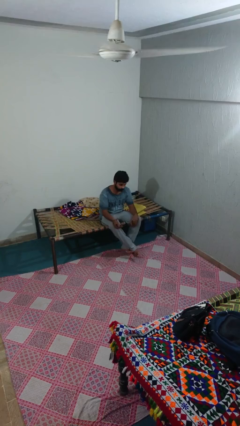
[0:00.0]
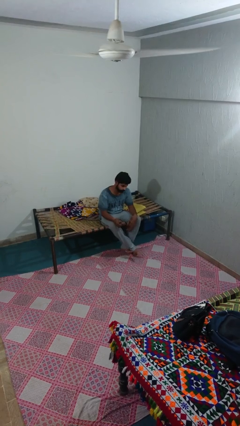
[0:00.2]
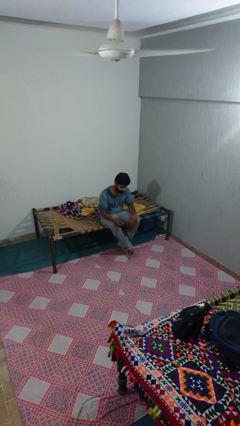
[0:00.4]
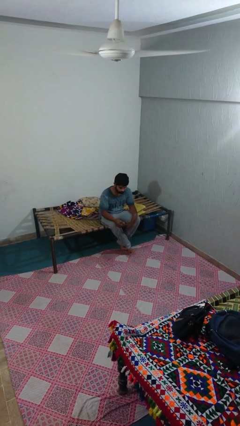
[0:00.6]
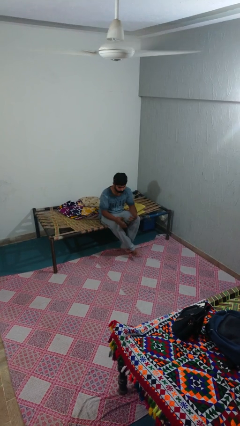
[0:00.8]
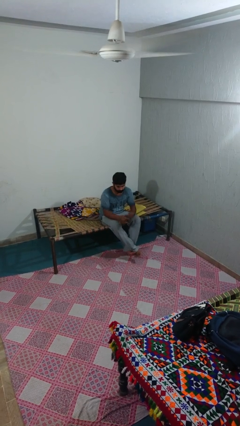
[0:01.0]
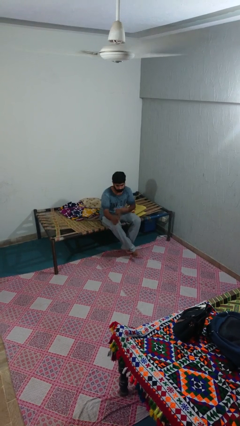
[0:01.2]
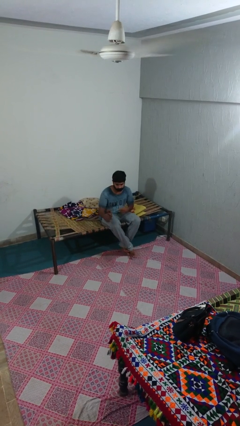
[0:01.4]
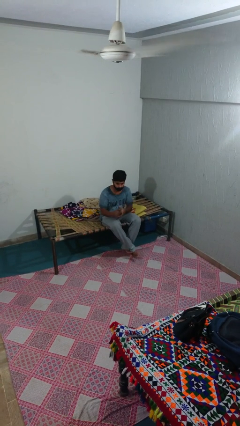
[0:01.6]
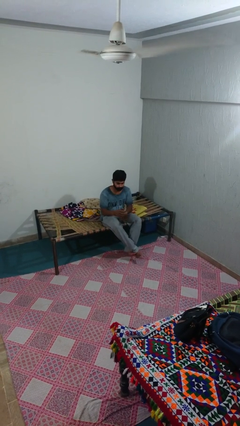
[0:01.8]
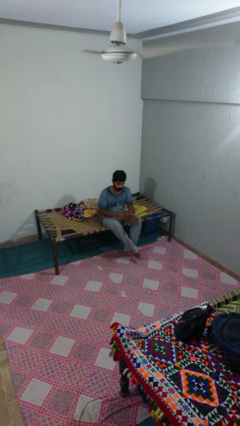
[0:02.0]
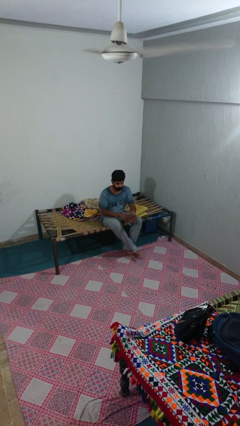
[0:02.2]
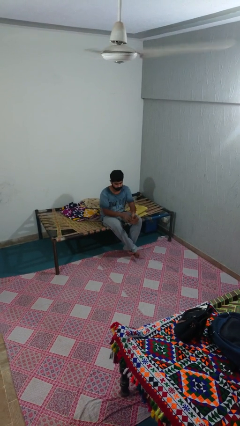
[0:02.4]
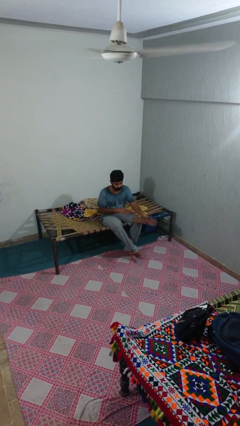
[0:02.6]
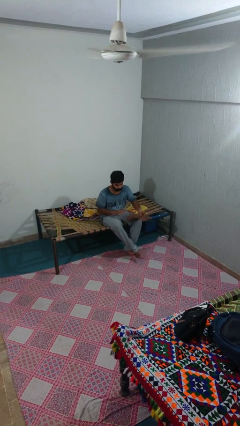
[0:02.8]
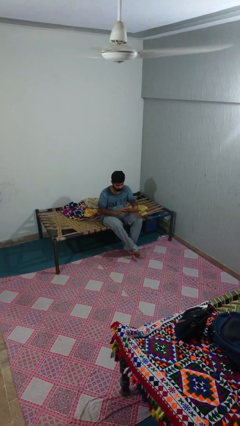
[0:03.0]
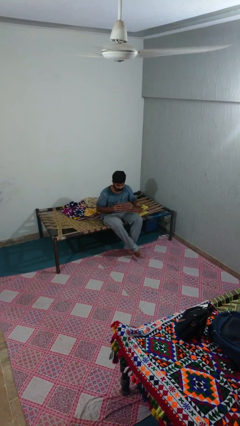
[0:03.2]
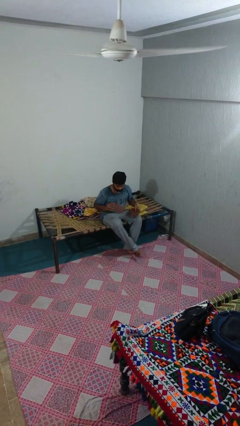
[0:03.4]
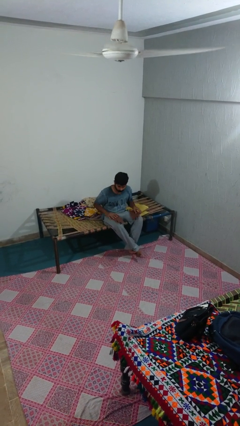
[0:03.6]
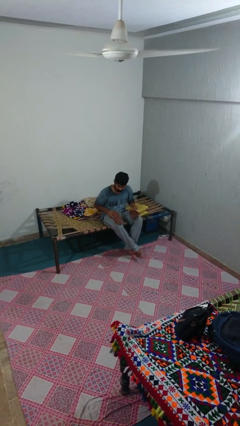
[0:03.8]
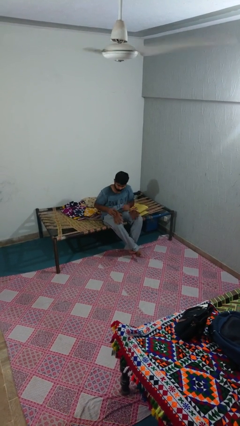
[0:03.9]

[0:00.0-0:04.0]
person takes off gloves

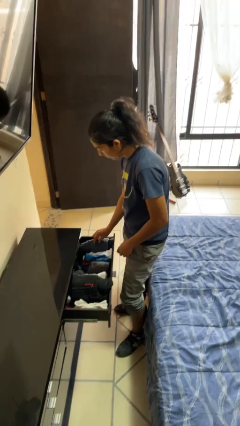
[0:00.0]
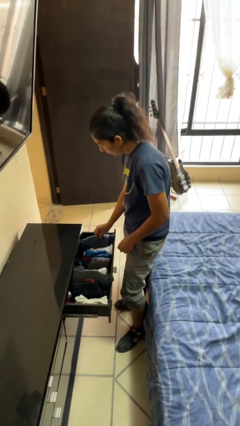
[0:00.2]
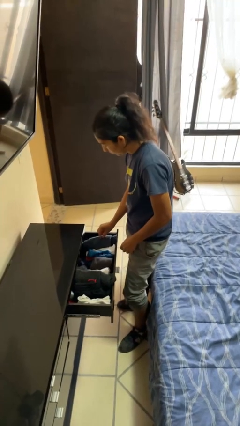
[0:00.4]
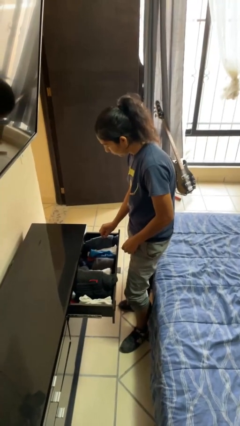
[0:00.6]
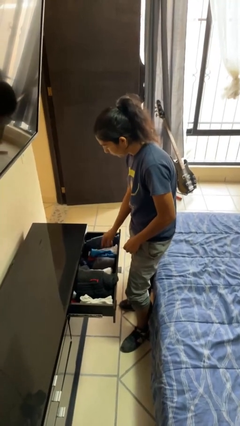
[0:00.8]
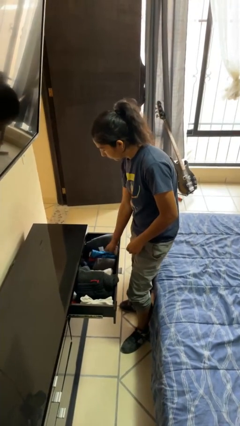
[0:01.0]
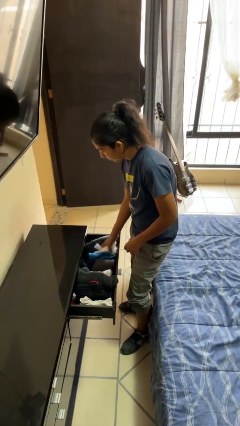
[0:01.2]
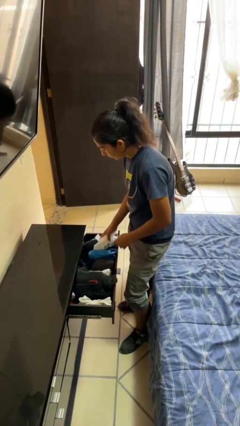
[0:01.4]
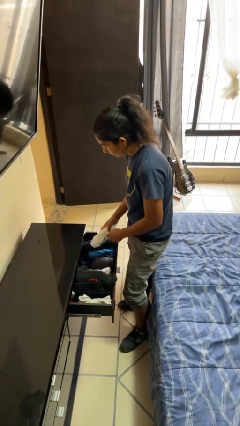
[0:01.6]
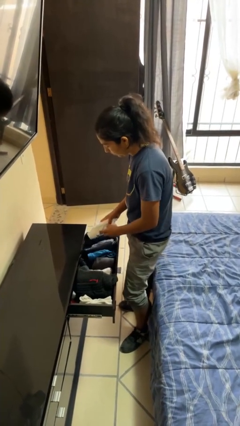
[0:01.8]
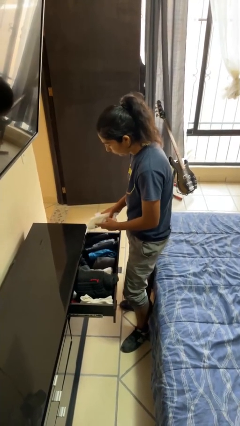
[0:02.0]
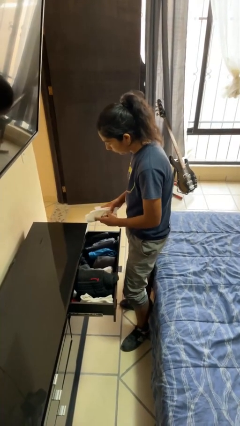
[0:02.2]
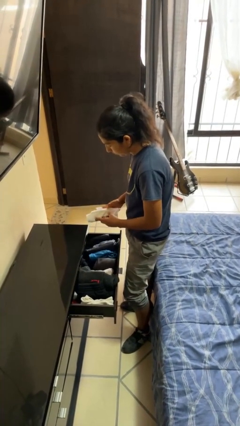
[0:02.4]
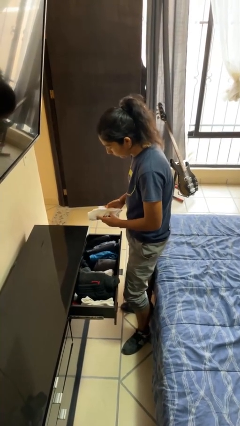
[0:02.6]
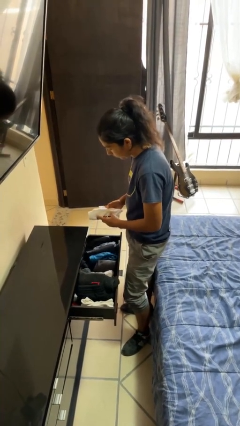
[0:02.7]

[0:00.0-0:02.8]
person takes clothes from dresser

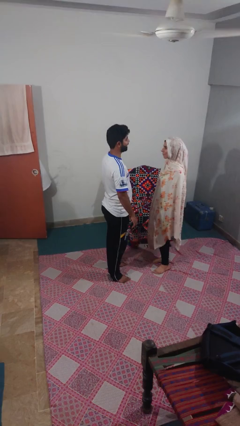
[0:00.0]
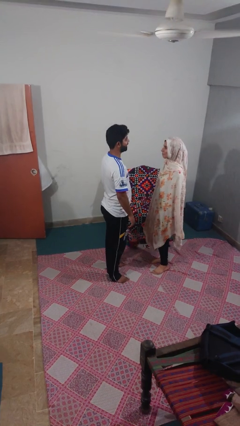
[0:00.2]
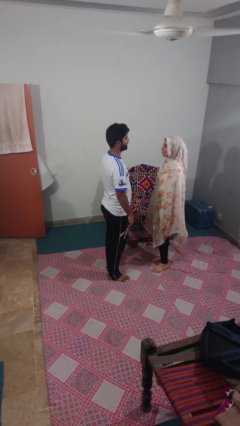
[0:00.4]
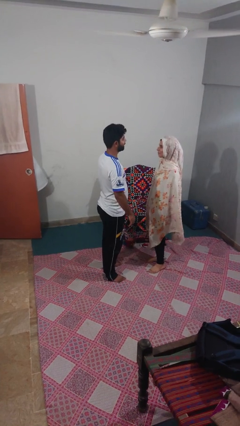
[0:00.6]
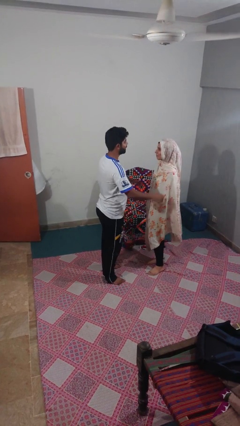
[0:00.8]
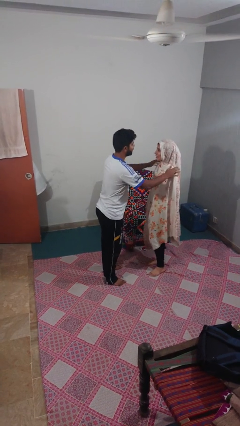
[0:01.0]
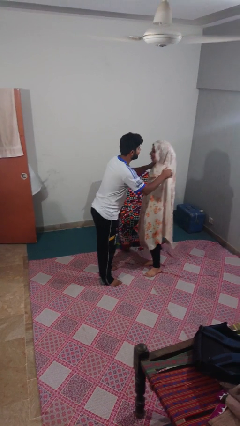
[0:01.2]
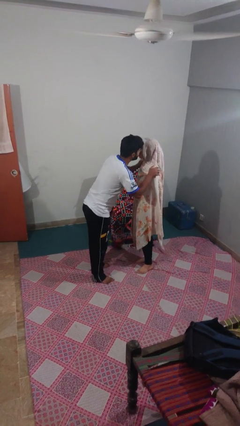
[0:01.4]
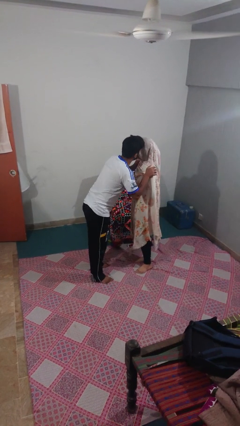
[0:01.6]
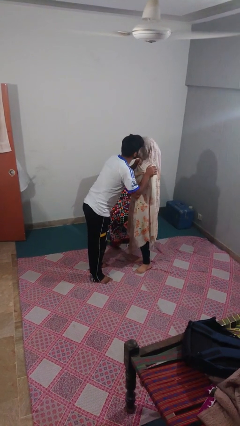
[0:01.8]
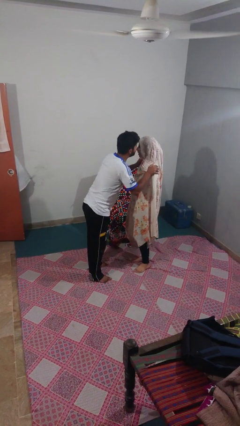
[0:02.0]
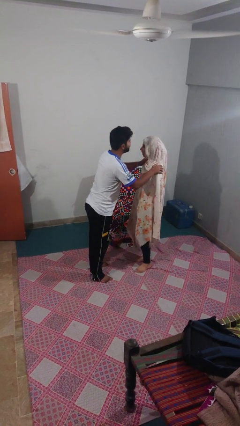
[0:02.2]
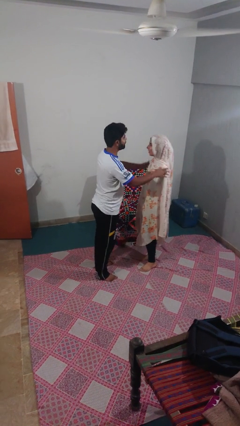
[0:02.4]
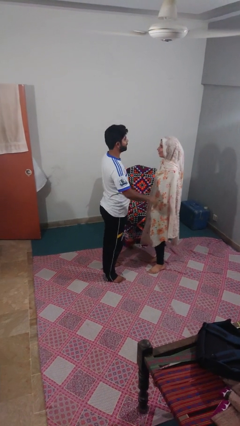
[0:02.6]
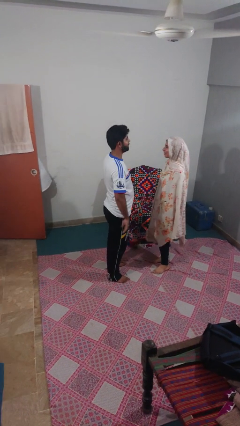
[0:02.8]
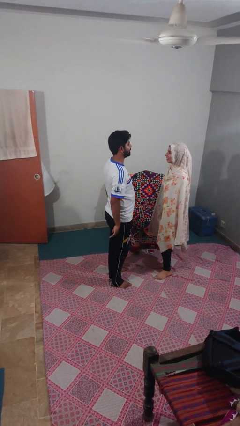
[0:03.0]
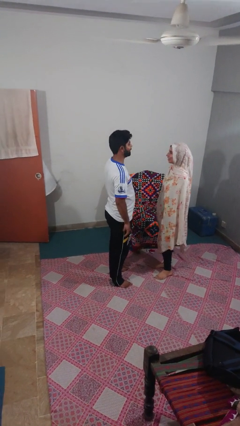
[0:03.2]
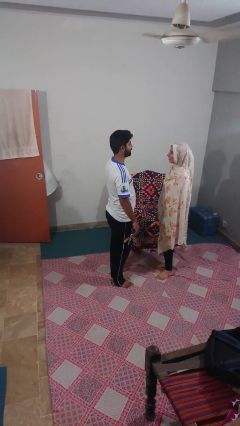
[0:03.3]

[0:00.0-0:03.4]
person kisses cheek of person

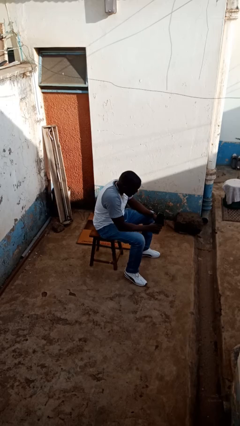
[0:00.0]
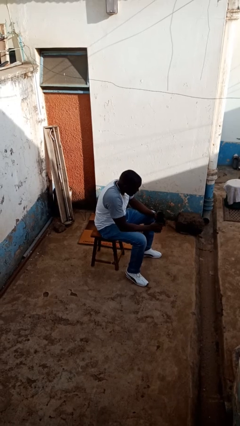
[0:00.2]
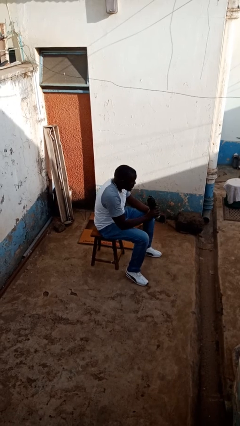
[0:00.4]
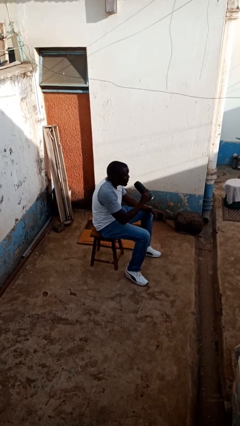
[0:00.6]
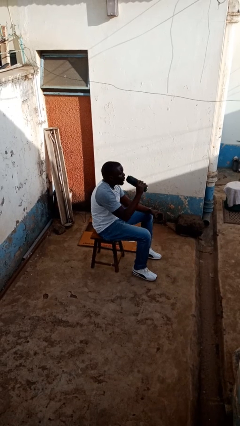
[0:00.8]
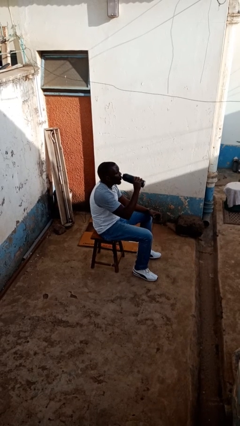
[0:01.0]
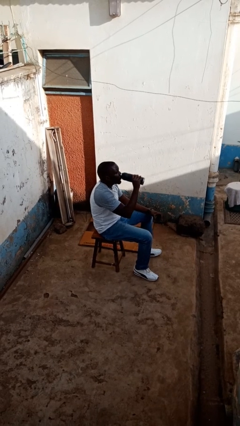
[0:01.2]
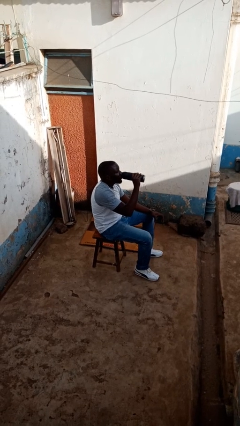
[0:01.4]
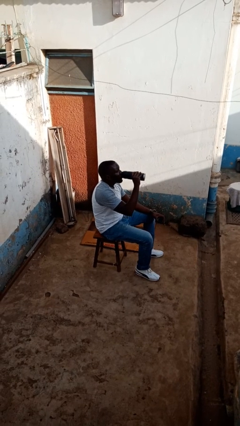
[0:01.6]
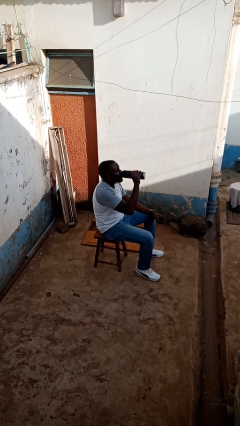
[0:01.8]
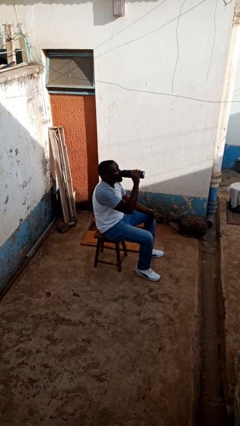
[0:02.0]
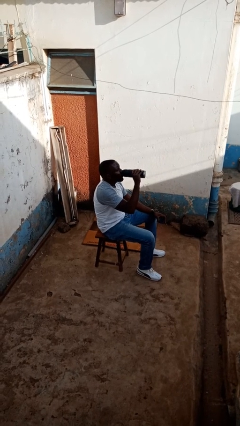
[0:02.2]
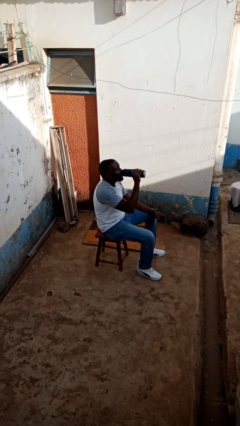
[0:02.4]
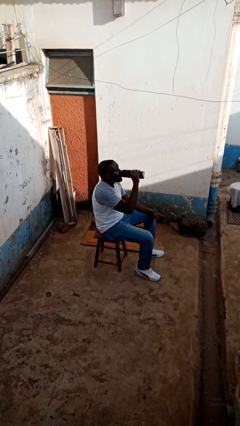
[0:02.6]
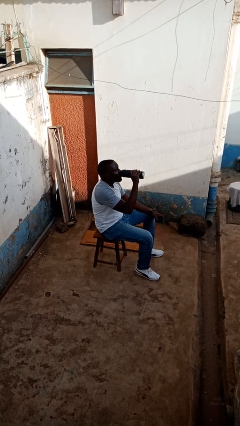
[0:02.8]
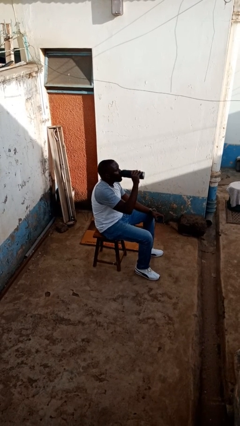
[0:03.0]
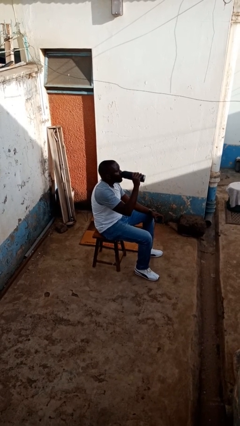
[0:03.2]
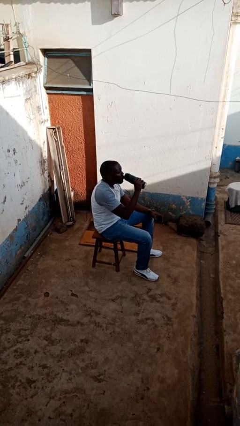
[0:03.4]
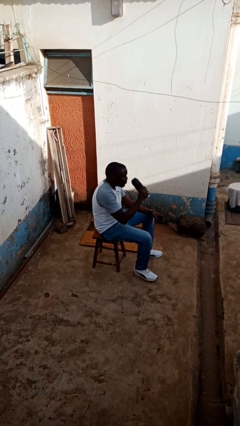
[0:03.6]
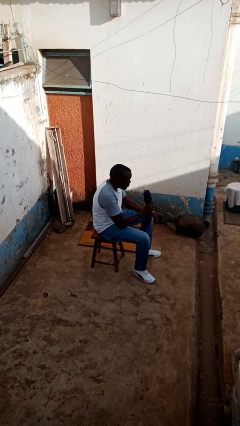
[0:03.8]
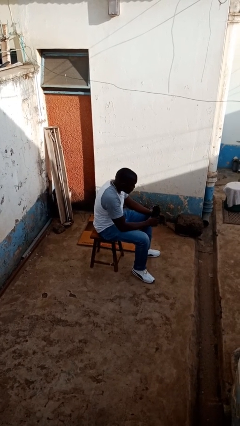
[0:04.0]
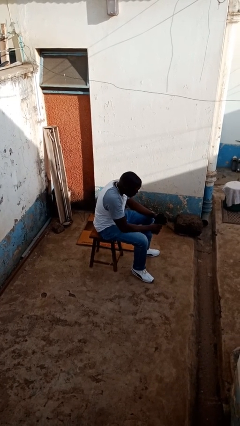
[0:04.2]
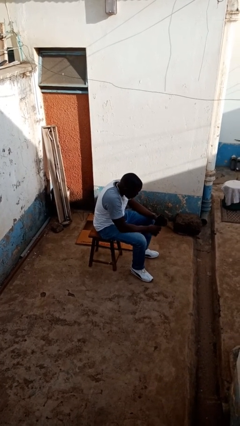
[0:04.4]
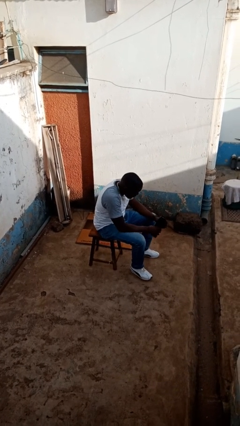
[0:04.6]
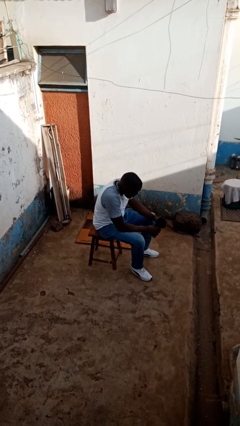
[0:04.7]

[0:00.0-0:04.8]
person drinks from bottle

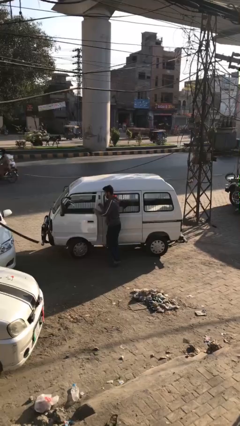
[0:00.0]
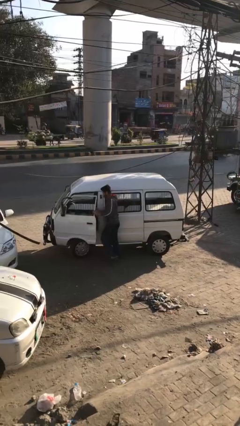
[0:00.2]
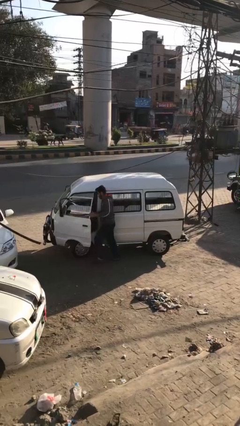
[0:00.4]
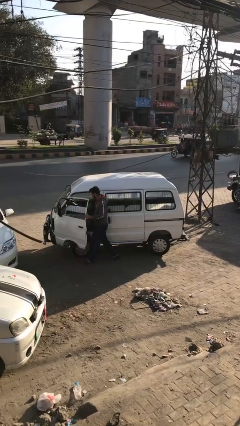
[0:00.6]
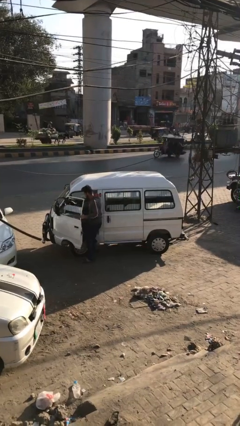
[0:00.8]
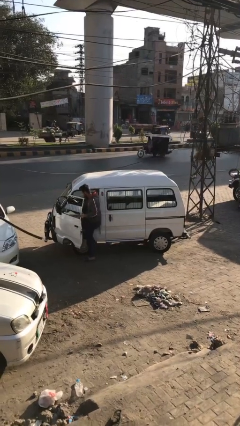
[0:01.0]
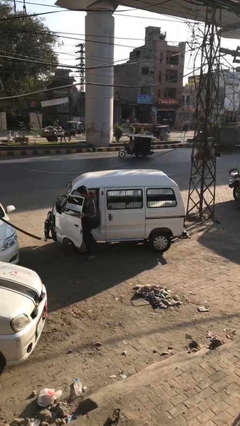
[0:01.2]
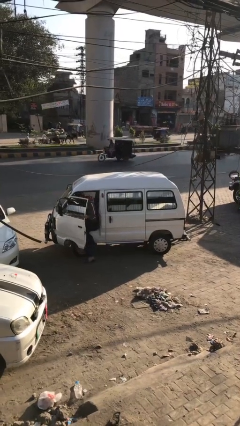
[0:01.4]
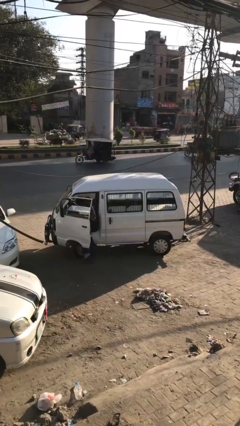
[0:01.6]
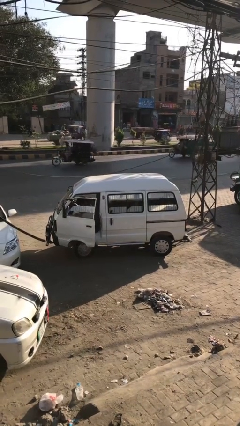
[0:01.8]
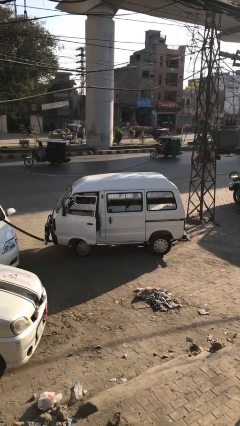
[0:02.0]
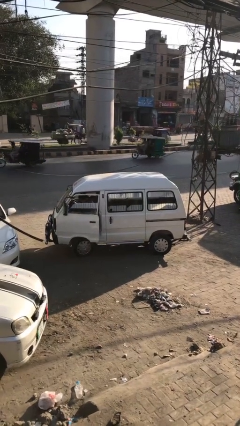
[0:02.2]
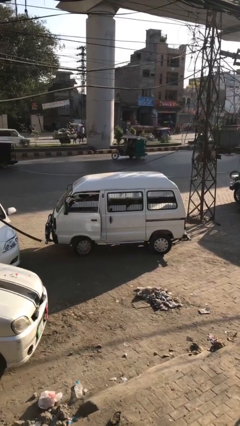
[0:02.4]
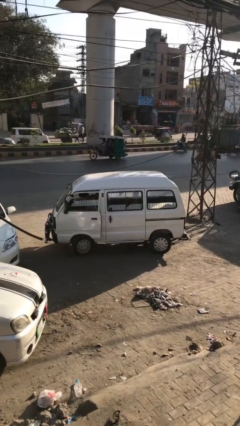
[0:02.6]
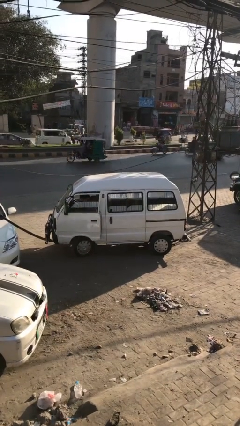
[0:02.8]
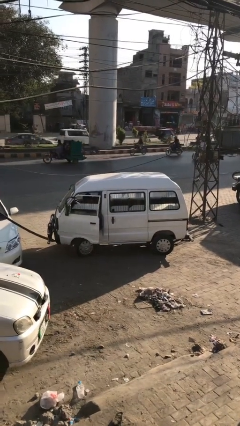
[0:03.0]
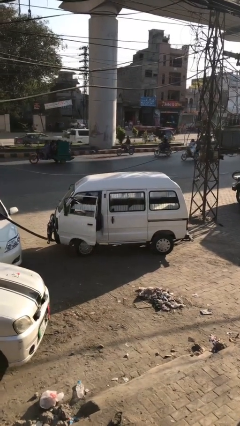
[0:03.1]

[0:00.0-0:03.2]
car picks up person
